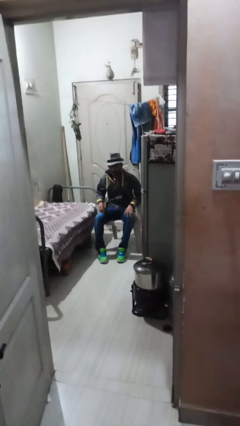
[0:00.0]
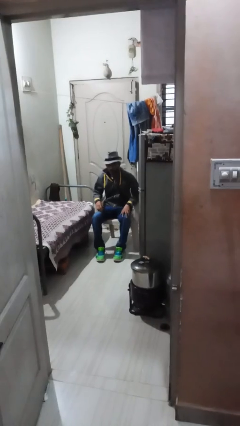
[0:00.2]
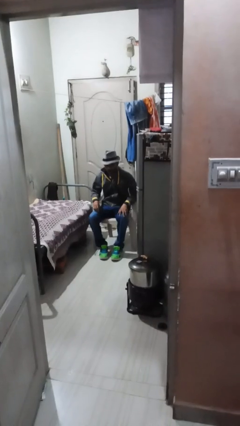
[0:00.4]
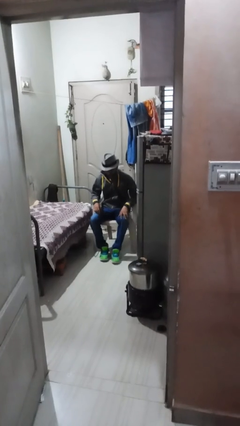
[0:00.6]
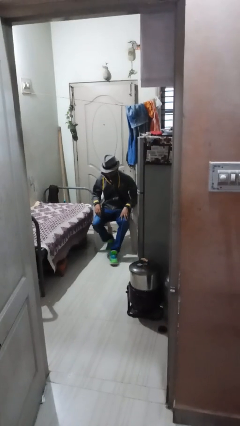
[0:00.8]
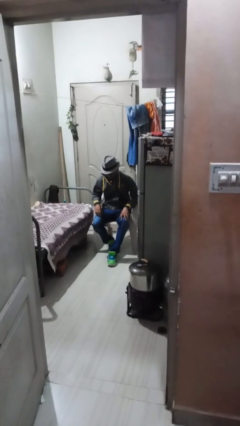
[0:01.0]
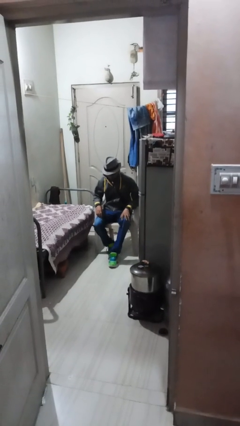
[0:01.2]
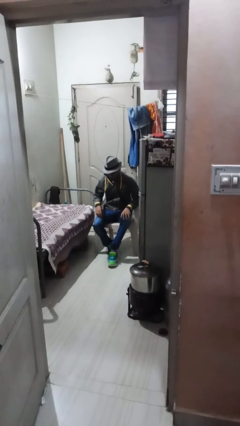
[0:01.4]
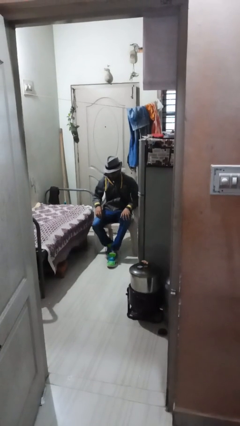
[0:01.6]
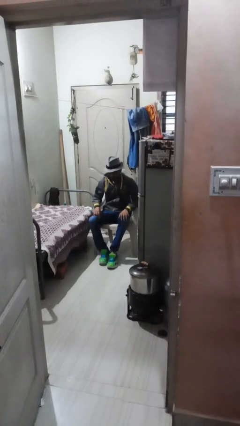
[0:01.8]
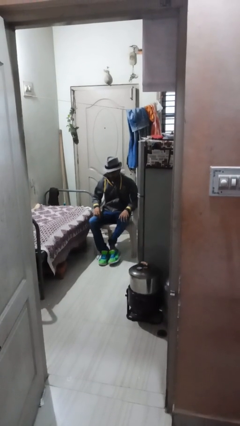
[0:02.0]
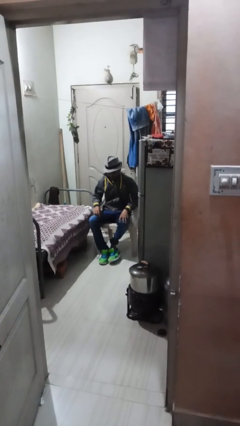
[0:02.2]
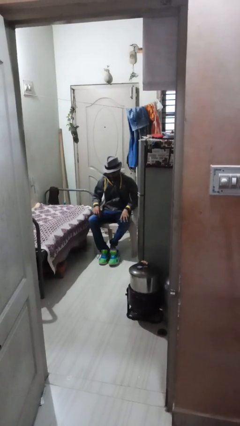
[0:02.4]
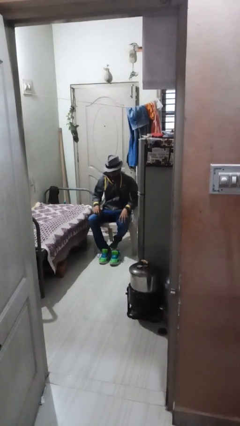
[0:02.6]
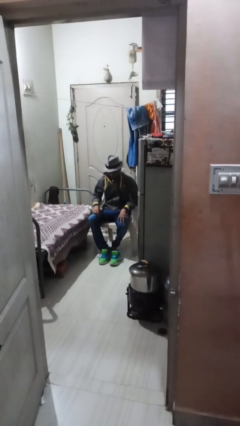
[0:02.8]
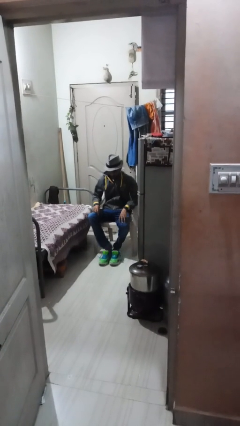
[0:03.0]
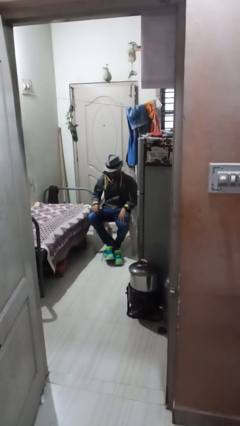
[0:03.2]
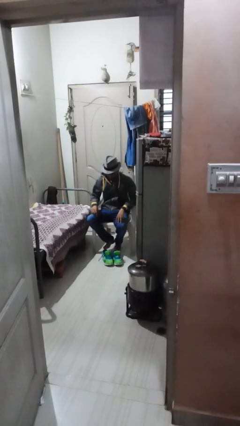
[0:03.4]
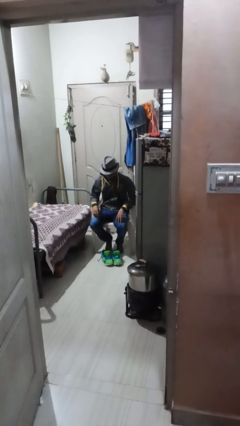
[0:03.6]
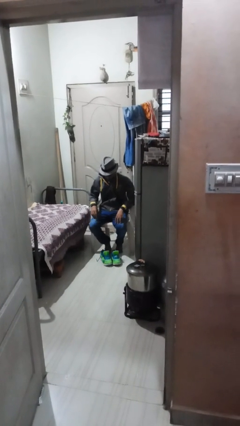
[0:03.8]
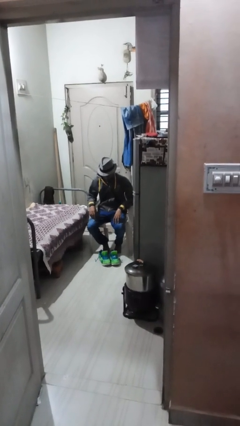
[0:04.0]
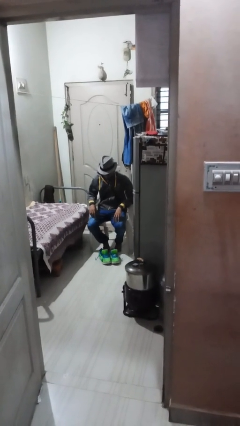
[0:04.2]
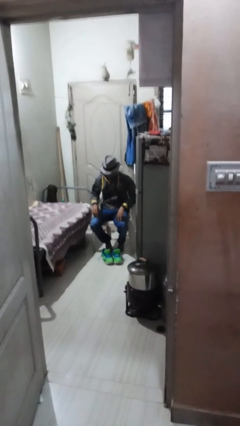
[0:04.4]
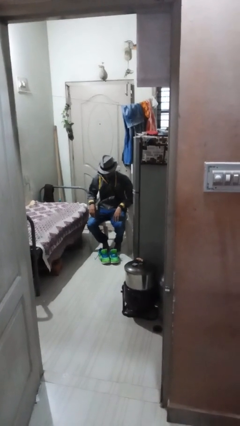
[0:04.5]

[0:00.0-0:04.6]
person takes off shoes

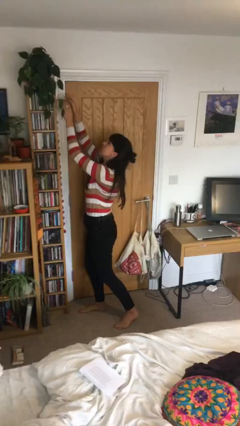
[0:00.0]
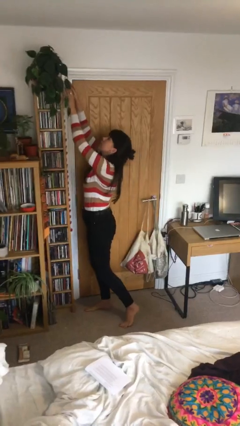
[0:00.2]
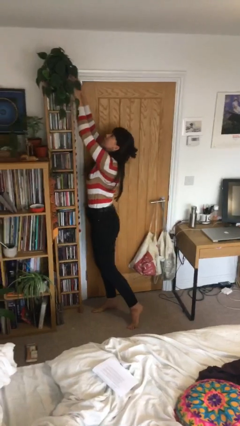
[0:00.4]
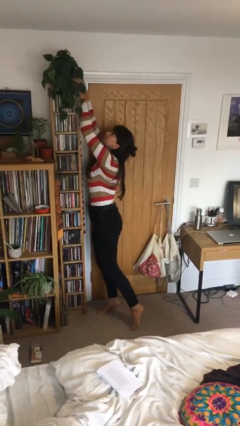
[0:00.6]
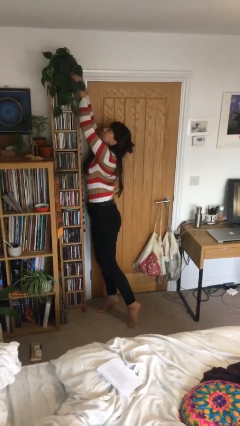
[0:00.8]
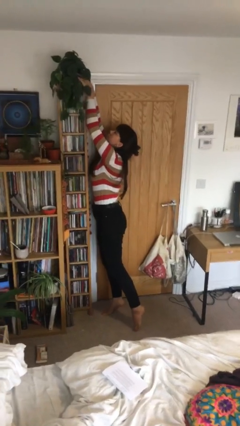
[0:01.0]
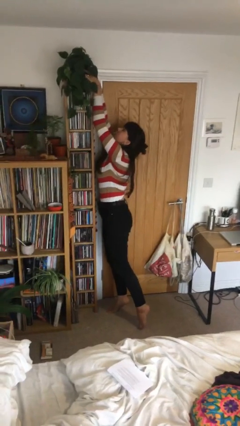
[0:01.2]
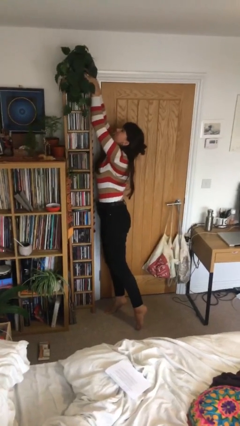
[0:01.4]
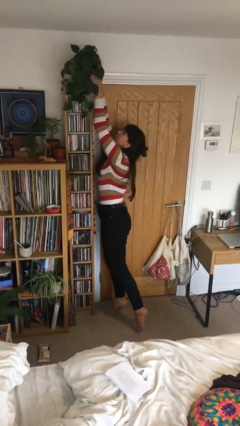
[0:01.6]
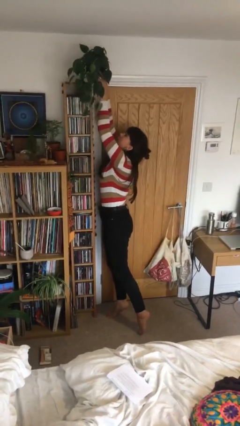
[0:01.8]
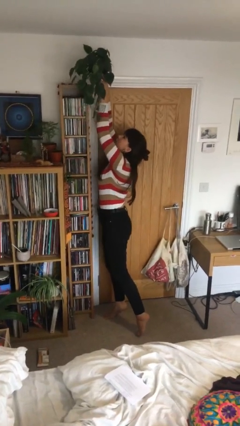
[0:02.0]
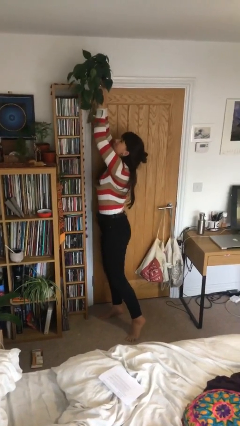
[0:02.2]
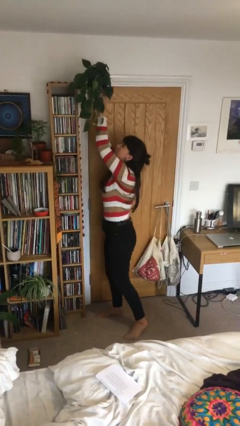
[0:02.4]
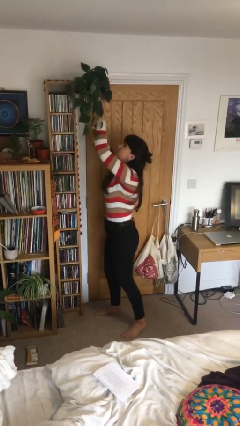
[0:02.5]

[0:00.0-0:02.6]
person picks up object from shelf

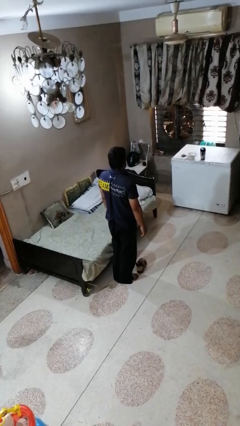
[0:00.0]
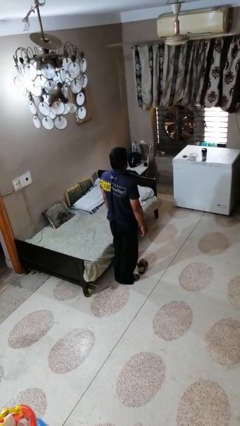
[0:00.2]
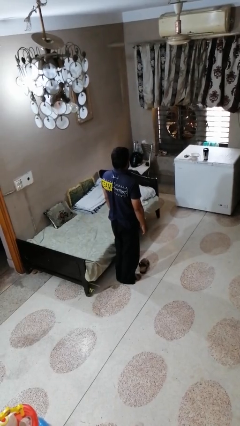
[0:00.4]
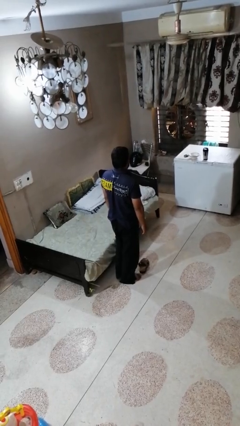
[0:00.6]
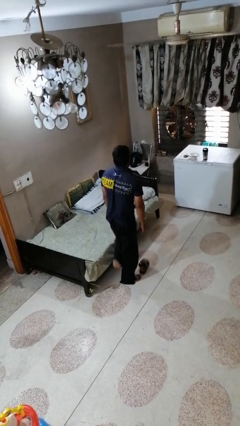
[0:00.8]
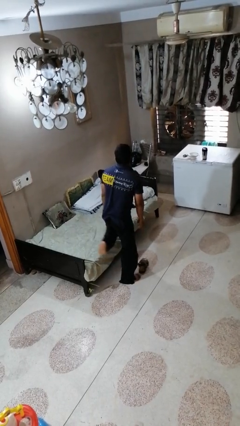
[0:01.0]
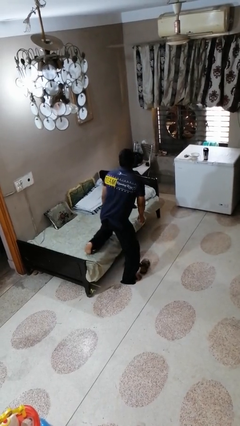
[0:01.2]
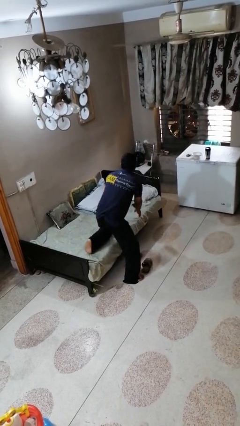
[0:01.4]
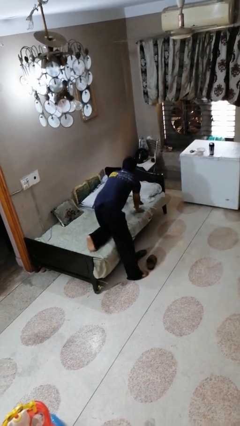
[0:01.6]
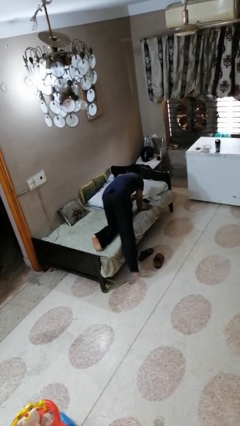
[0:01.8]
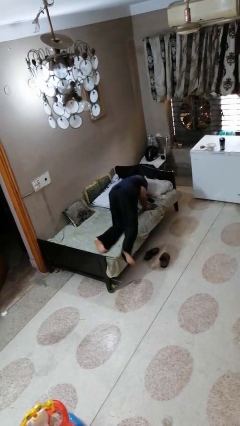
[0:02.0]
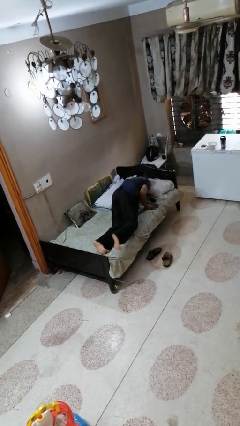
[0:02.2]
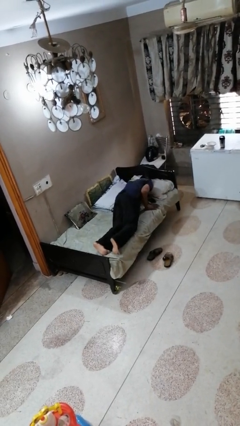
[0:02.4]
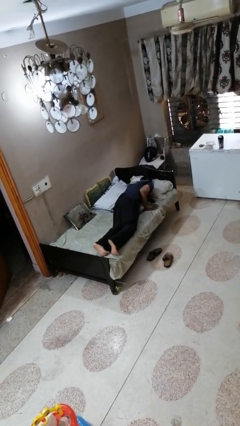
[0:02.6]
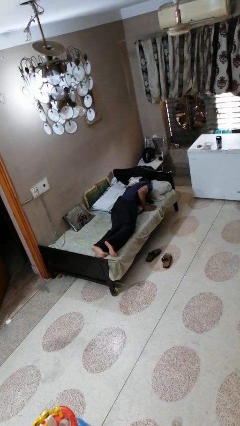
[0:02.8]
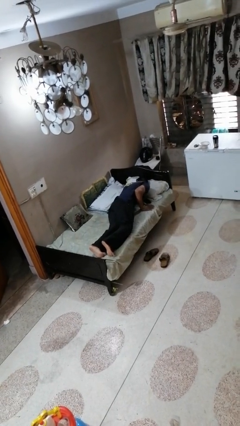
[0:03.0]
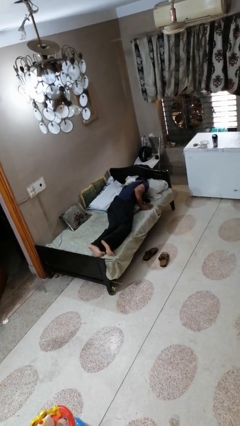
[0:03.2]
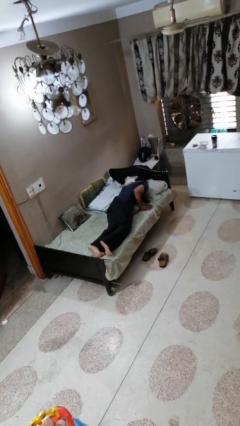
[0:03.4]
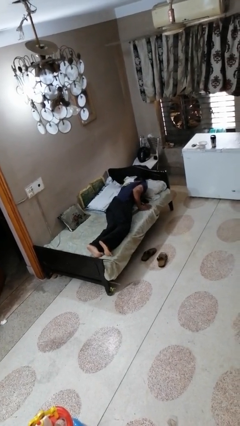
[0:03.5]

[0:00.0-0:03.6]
person lies down on bed

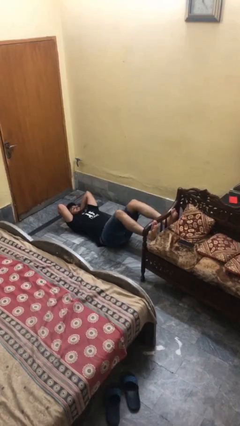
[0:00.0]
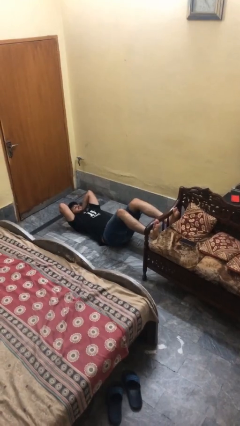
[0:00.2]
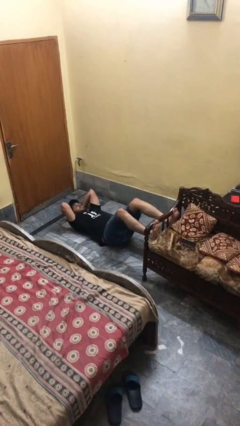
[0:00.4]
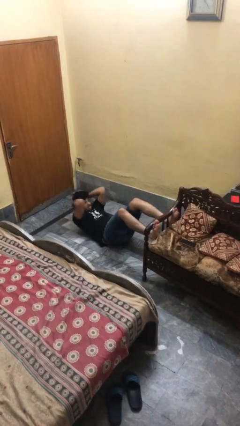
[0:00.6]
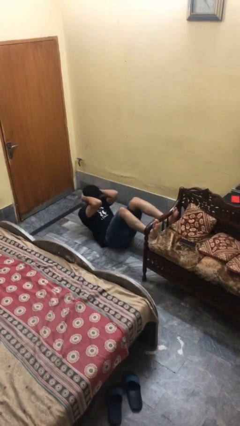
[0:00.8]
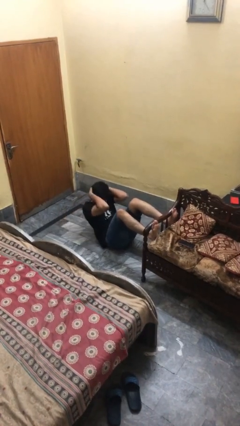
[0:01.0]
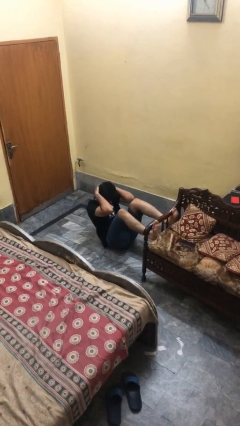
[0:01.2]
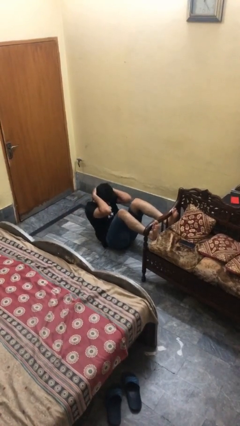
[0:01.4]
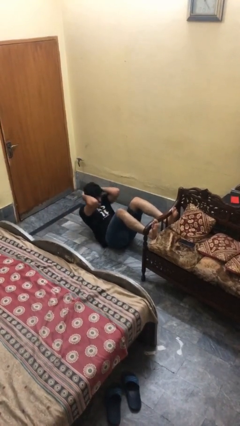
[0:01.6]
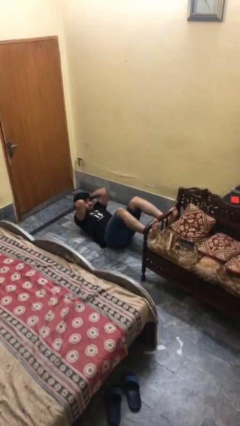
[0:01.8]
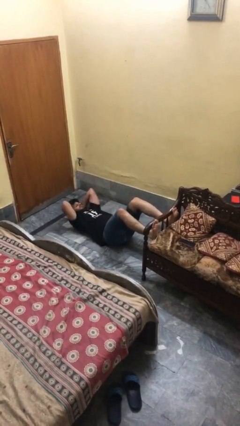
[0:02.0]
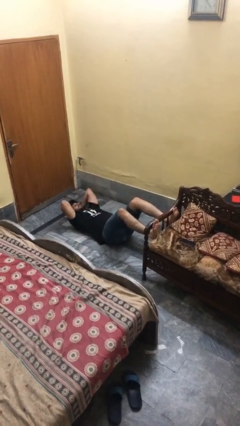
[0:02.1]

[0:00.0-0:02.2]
person exercises with situp

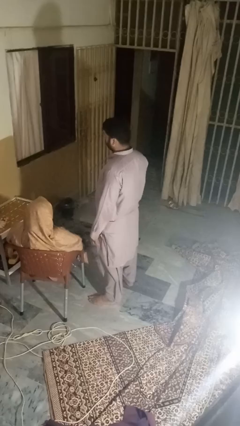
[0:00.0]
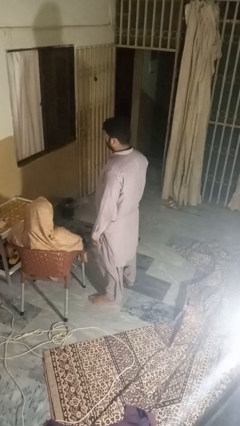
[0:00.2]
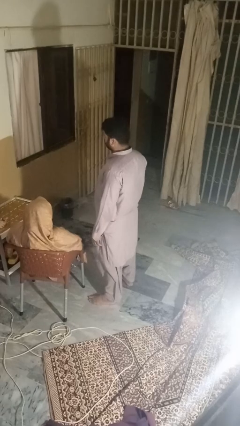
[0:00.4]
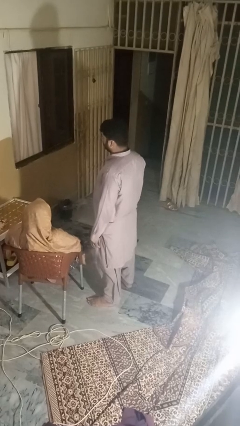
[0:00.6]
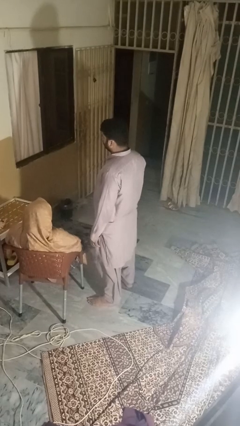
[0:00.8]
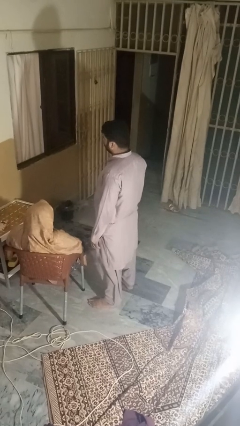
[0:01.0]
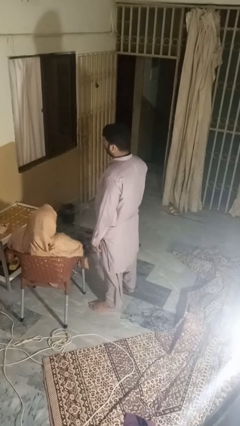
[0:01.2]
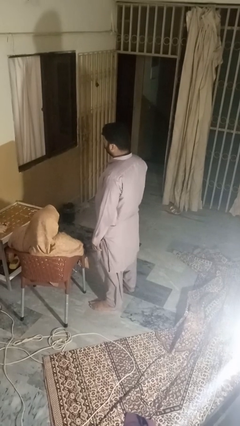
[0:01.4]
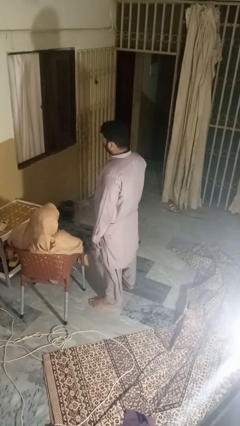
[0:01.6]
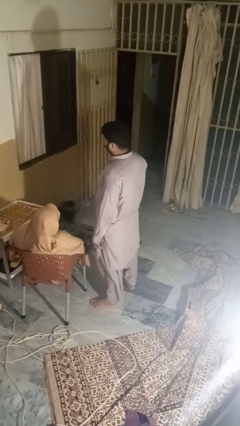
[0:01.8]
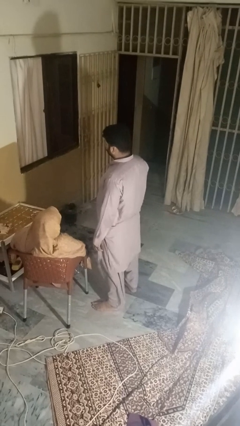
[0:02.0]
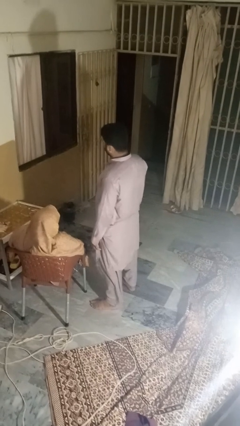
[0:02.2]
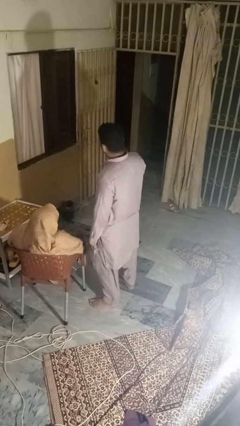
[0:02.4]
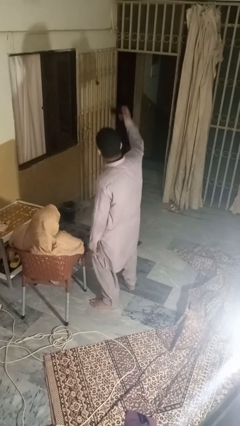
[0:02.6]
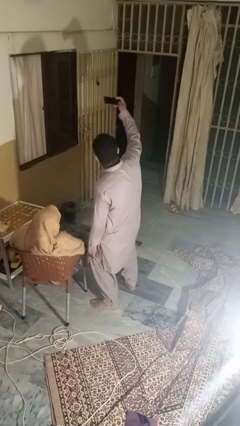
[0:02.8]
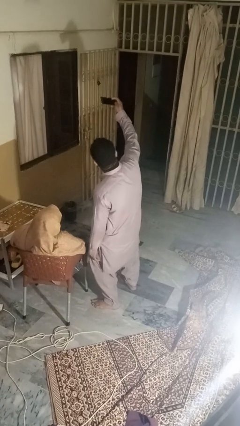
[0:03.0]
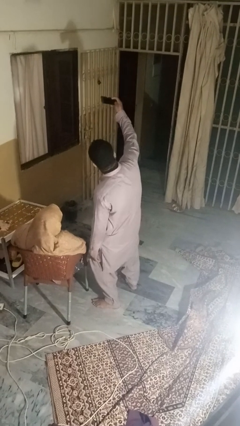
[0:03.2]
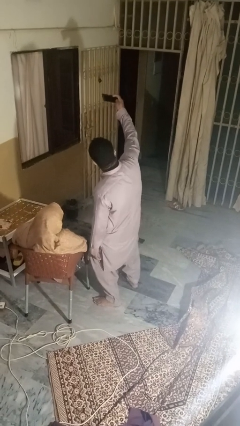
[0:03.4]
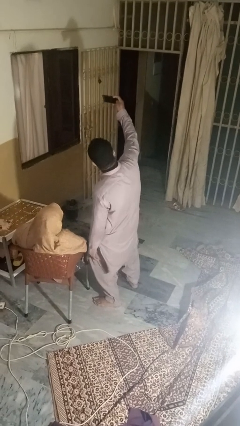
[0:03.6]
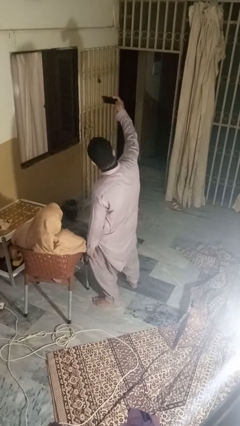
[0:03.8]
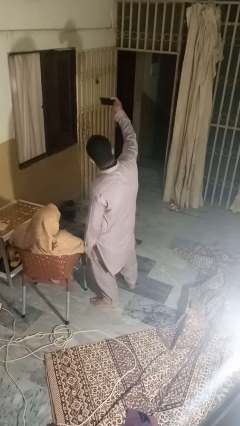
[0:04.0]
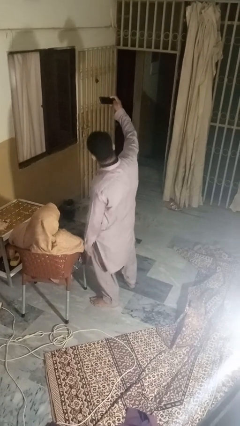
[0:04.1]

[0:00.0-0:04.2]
person takes selfie with person
